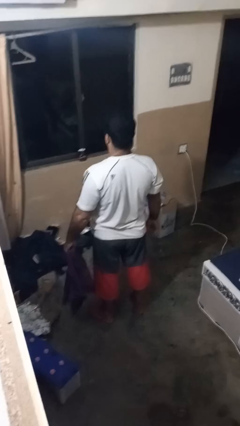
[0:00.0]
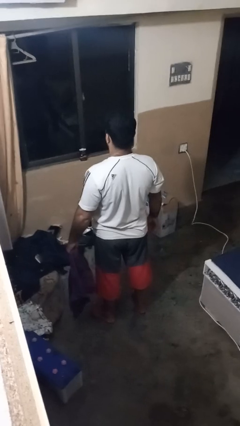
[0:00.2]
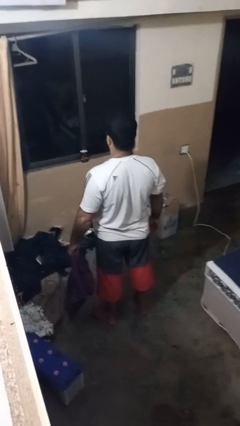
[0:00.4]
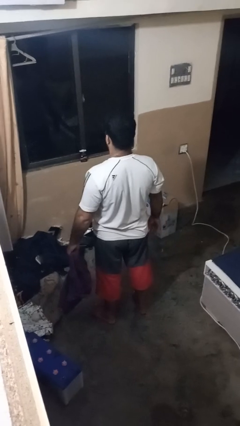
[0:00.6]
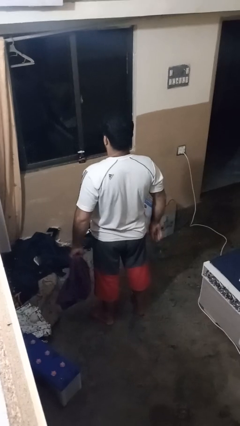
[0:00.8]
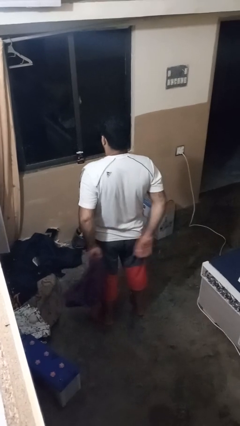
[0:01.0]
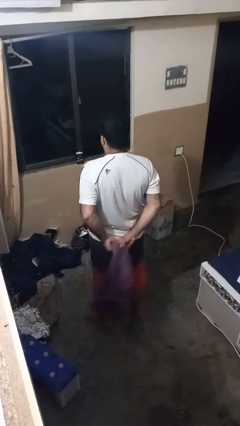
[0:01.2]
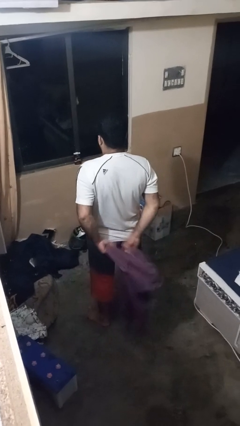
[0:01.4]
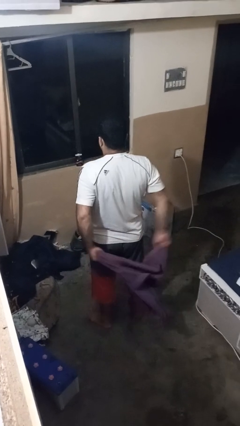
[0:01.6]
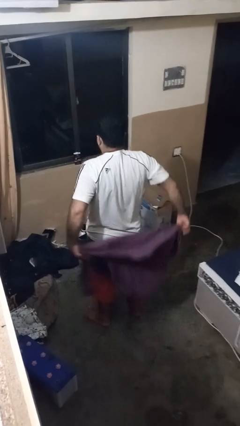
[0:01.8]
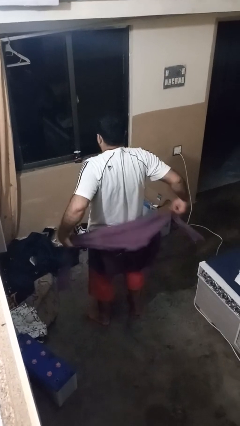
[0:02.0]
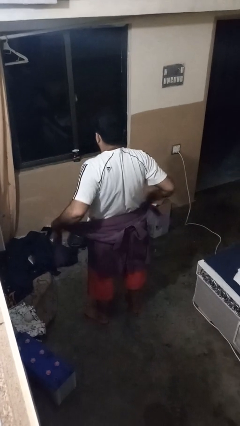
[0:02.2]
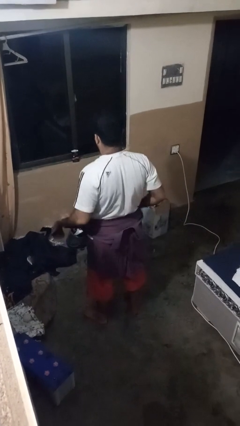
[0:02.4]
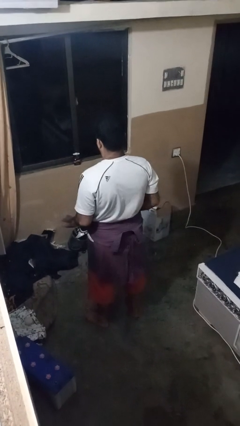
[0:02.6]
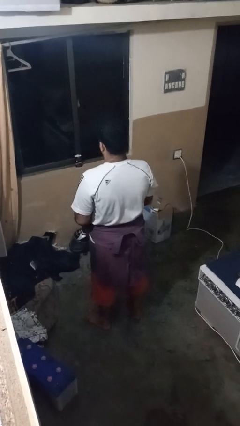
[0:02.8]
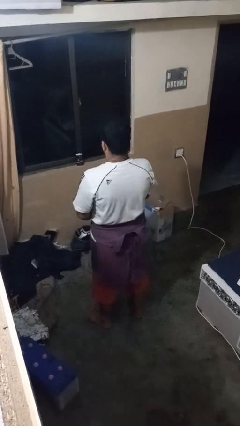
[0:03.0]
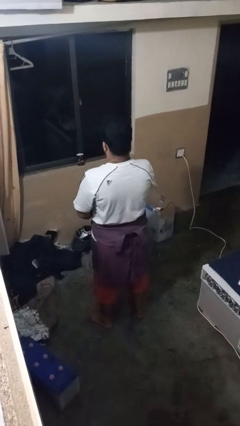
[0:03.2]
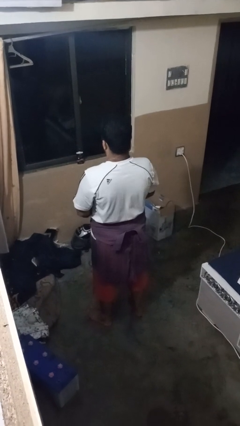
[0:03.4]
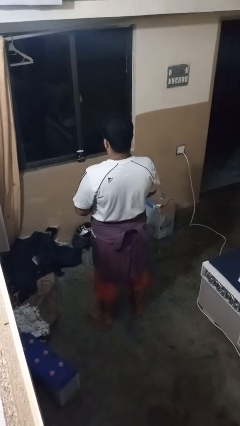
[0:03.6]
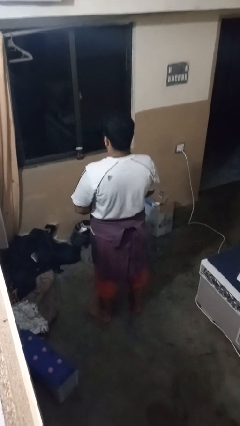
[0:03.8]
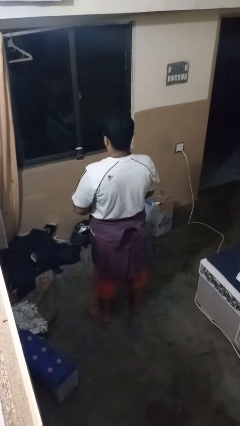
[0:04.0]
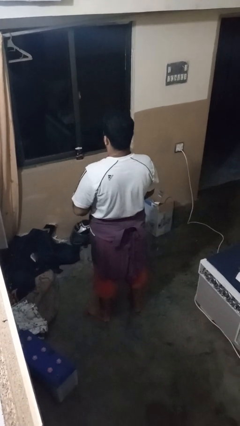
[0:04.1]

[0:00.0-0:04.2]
person ties jacket around waist

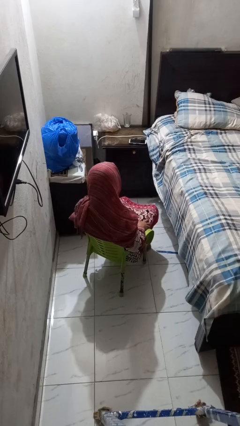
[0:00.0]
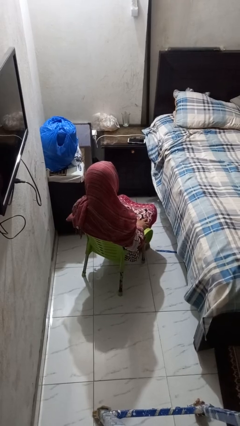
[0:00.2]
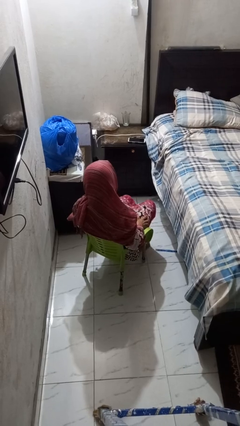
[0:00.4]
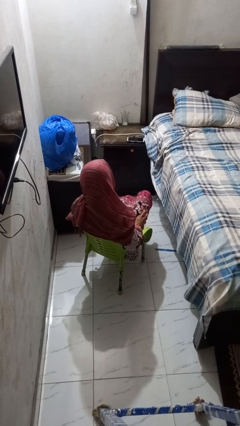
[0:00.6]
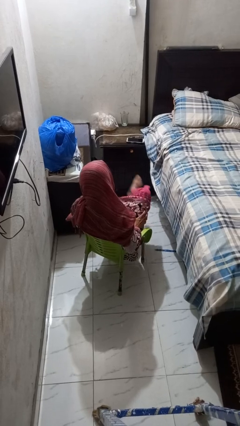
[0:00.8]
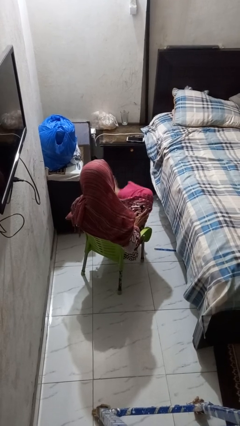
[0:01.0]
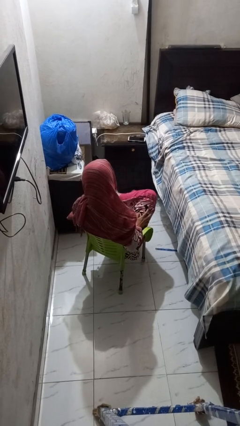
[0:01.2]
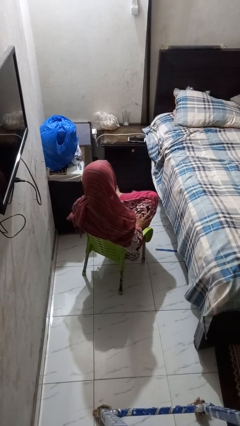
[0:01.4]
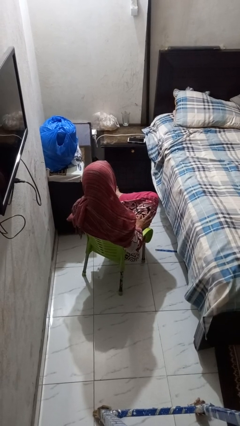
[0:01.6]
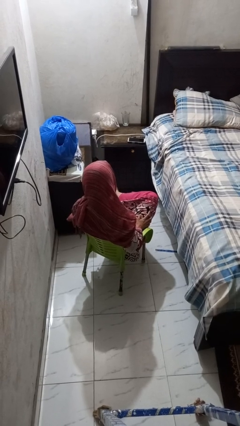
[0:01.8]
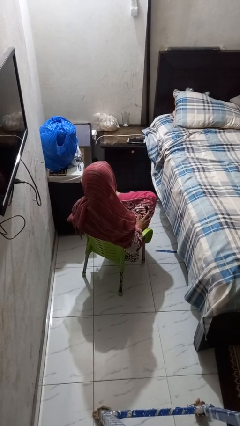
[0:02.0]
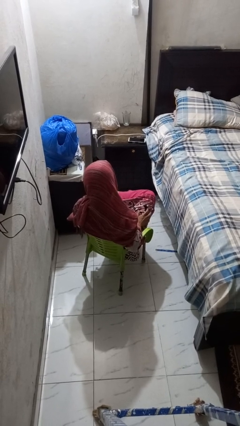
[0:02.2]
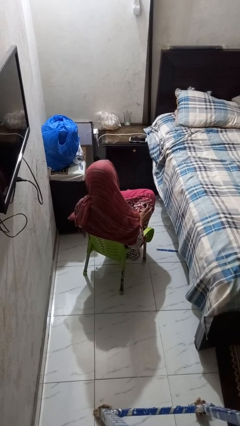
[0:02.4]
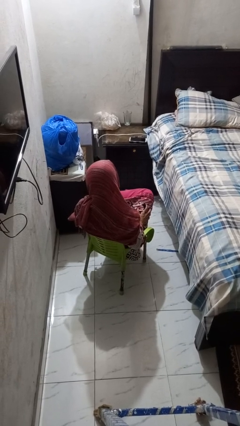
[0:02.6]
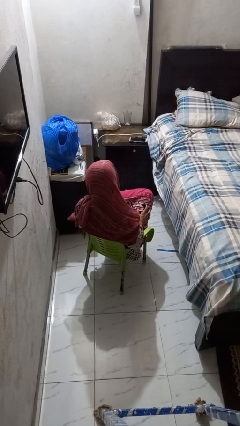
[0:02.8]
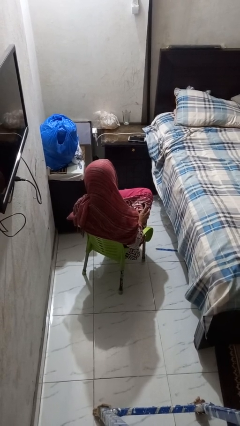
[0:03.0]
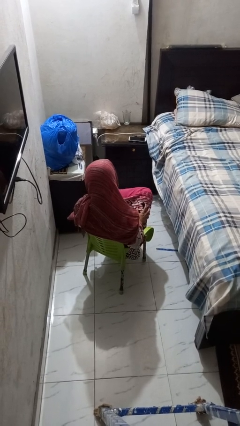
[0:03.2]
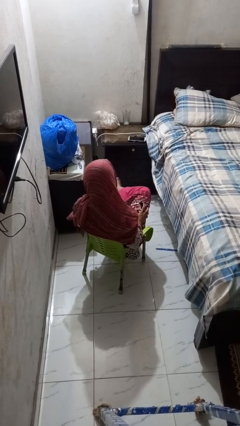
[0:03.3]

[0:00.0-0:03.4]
person crosses legs

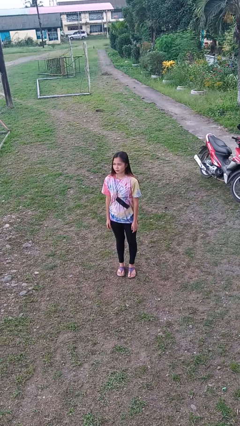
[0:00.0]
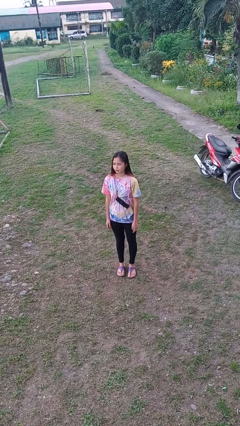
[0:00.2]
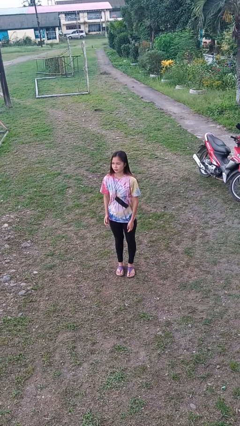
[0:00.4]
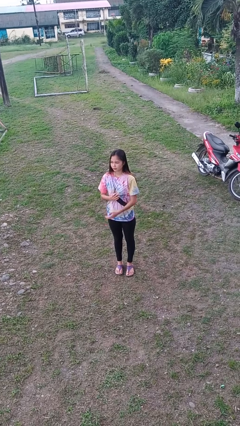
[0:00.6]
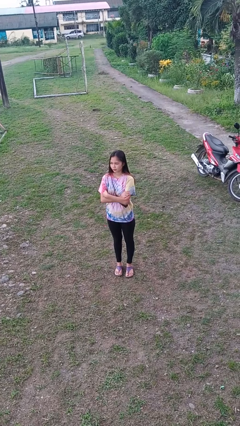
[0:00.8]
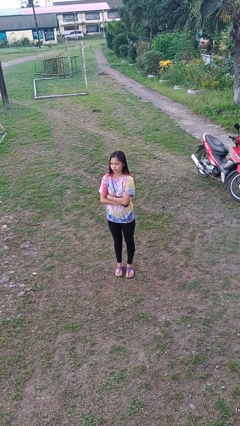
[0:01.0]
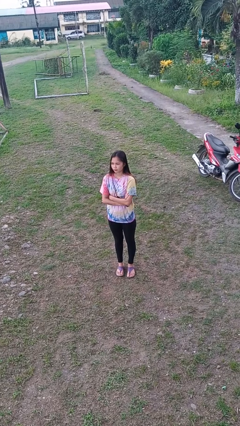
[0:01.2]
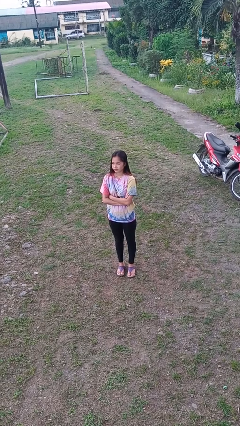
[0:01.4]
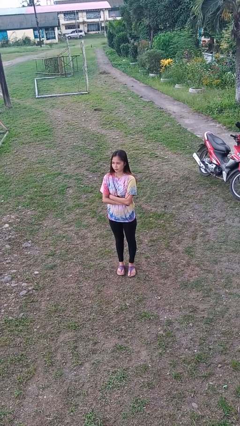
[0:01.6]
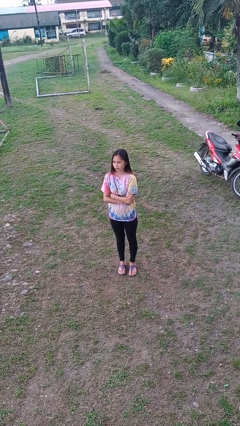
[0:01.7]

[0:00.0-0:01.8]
person crosses arms

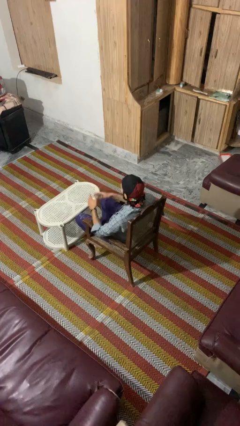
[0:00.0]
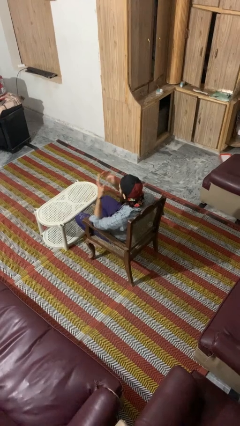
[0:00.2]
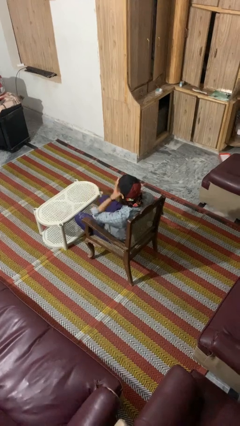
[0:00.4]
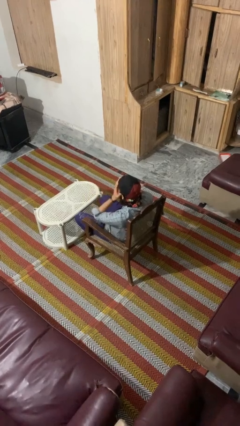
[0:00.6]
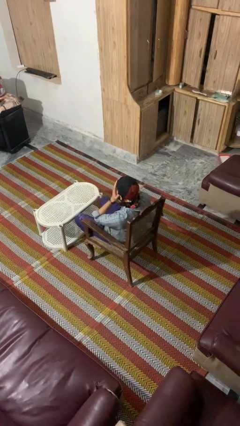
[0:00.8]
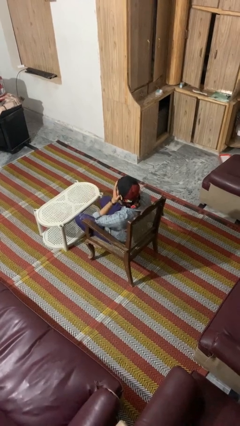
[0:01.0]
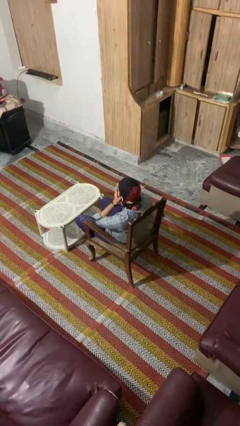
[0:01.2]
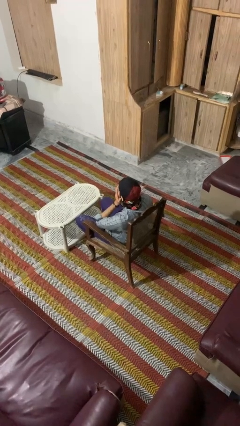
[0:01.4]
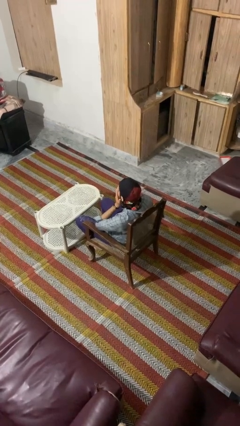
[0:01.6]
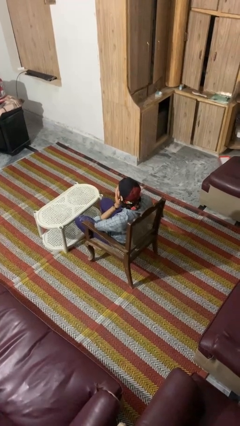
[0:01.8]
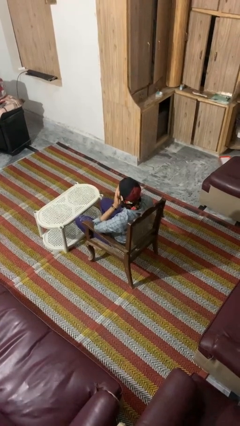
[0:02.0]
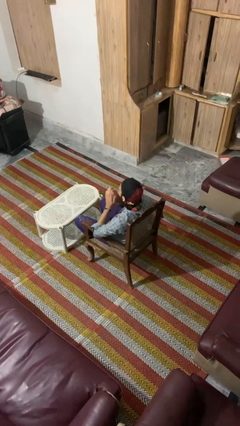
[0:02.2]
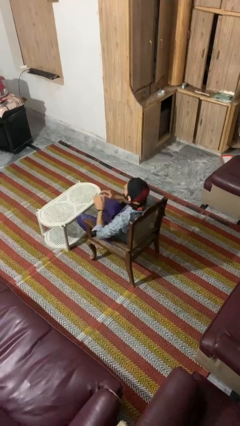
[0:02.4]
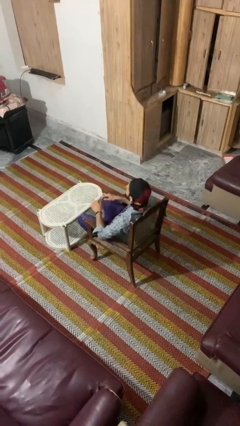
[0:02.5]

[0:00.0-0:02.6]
person covers face with hands

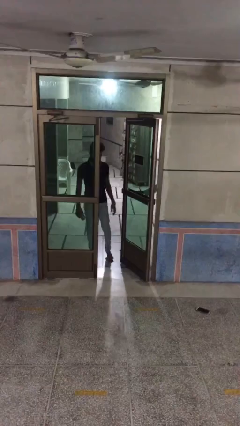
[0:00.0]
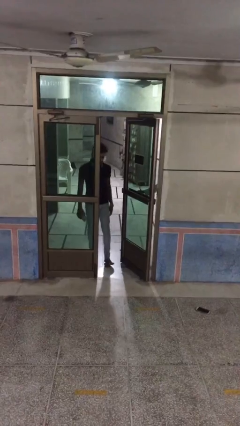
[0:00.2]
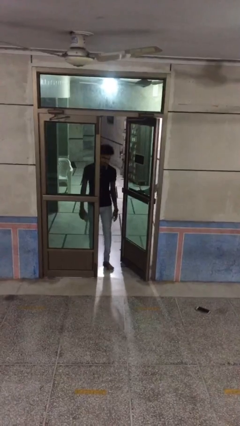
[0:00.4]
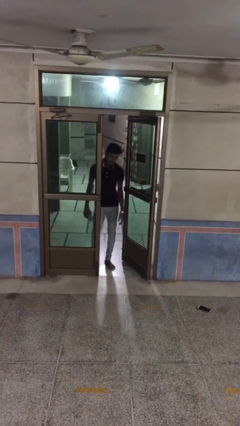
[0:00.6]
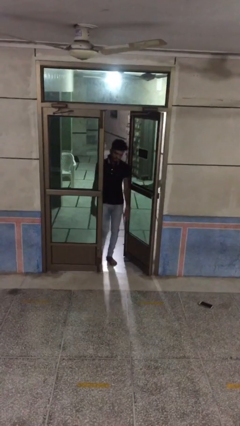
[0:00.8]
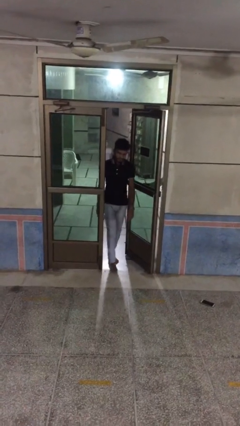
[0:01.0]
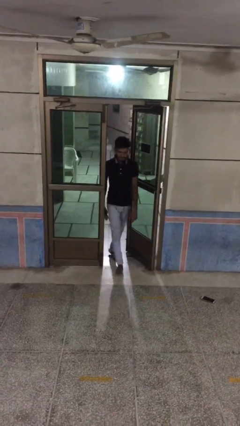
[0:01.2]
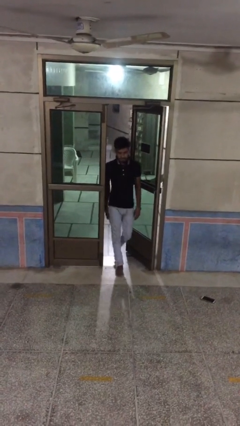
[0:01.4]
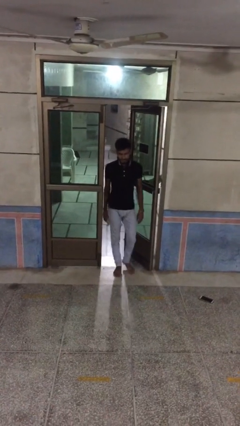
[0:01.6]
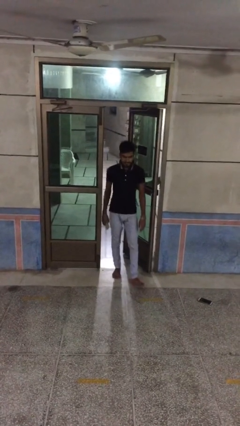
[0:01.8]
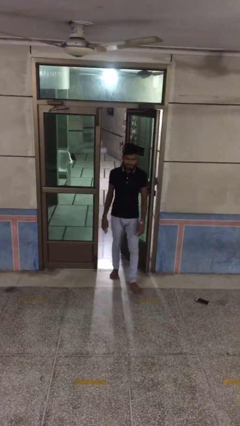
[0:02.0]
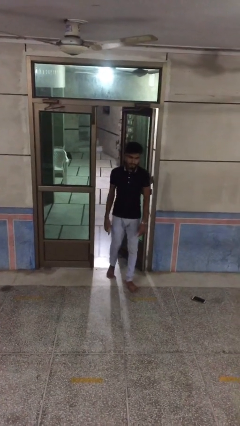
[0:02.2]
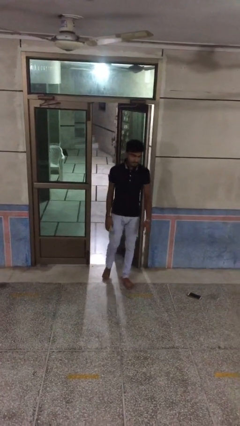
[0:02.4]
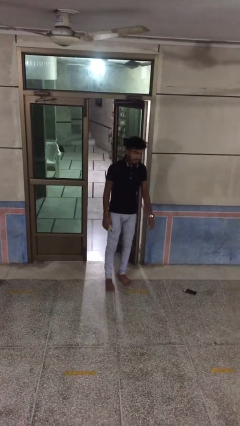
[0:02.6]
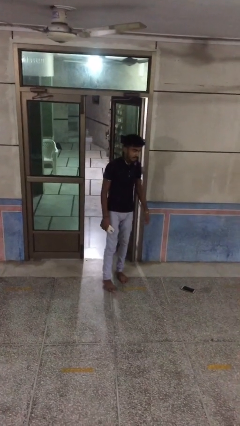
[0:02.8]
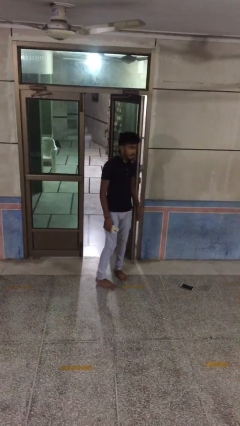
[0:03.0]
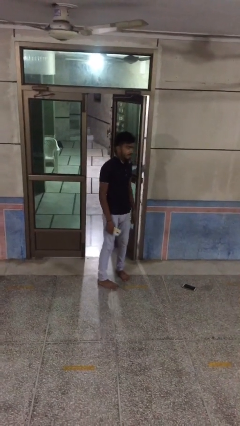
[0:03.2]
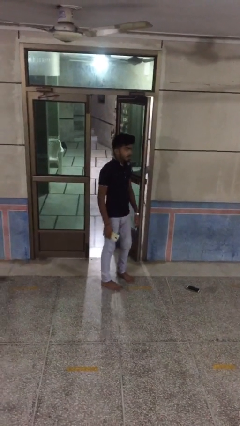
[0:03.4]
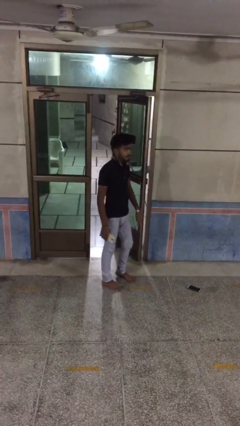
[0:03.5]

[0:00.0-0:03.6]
person enters scene through structure

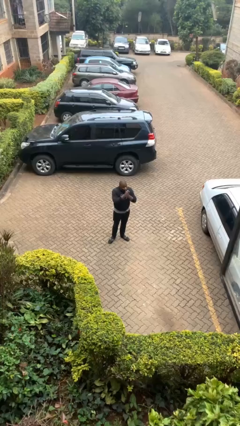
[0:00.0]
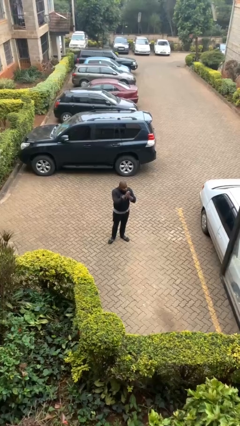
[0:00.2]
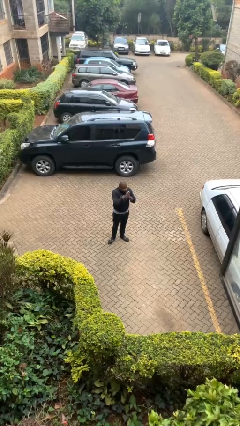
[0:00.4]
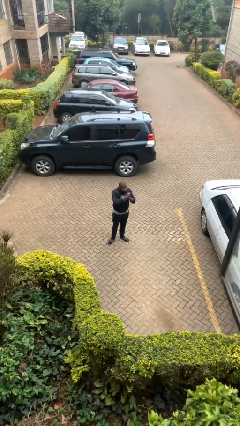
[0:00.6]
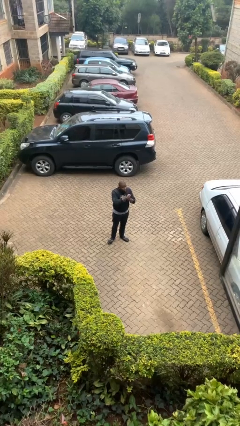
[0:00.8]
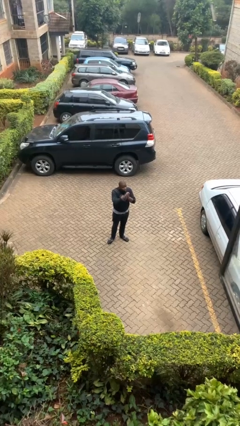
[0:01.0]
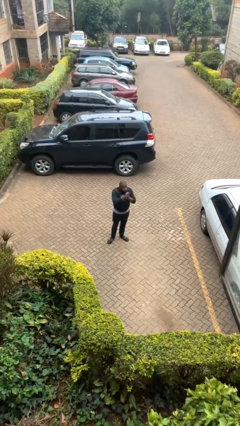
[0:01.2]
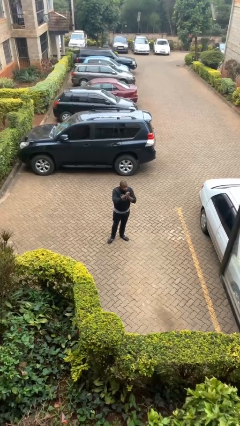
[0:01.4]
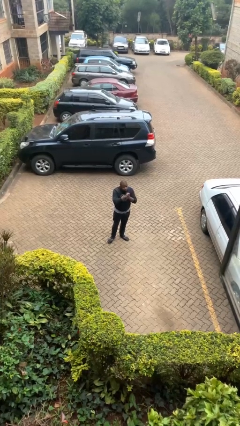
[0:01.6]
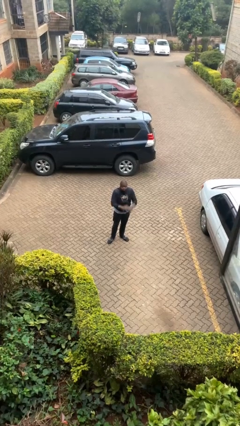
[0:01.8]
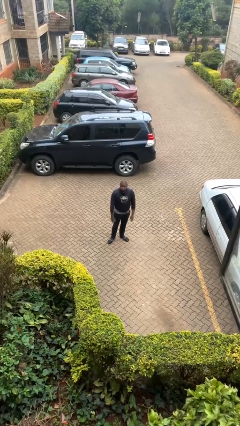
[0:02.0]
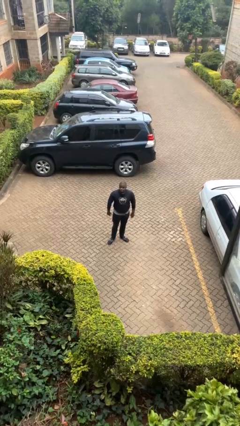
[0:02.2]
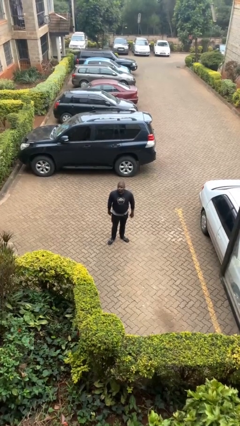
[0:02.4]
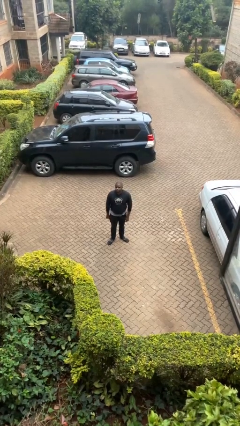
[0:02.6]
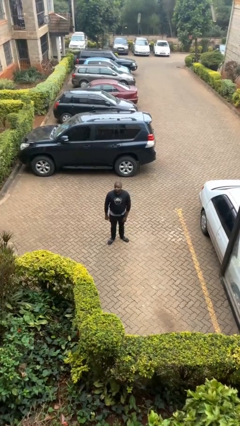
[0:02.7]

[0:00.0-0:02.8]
person blows into hands
